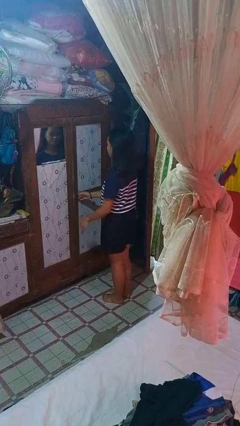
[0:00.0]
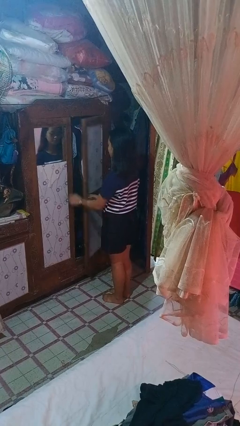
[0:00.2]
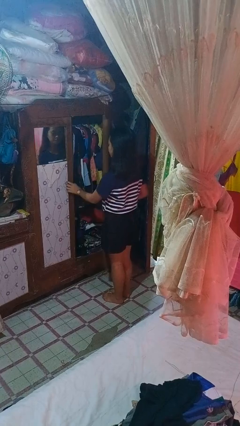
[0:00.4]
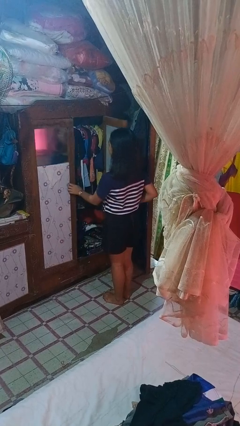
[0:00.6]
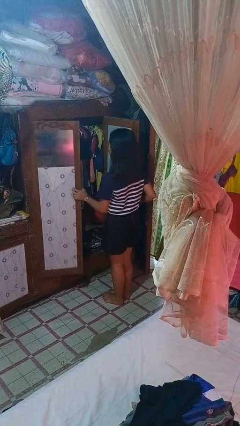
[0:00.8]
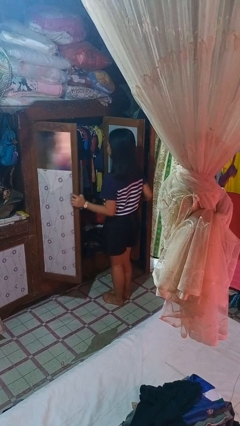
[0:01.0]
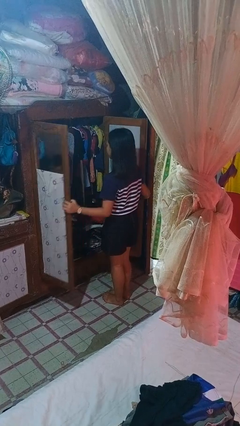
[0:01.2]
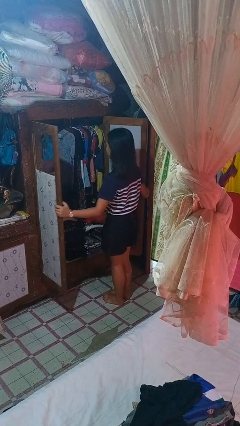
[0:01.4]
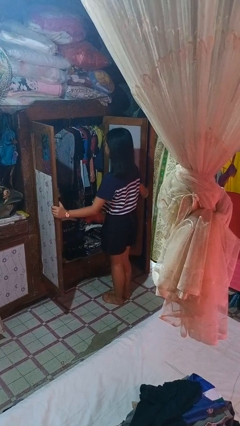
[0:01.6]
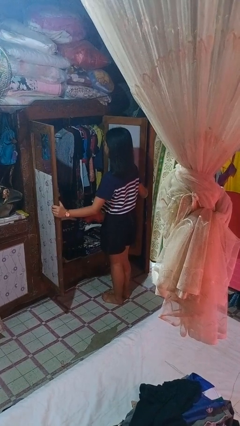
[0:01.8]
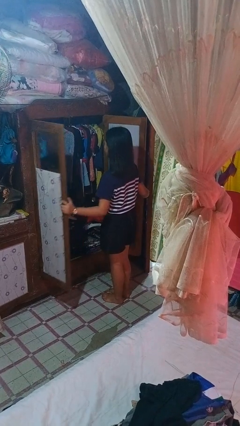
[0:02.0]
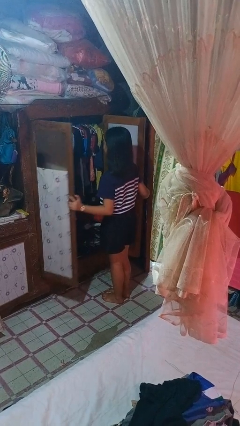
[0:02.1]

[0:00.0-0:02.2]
person opens closet door

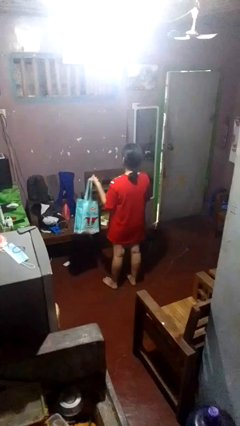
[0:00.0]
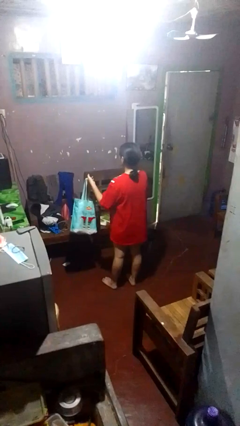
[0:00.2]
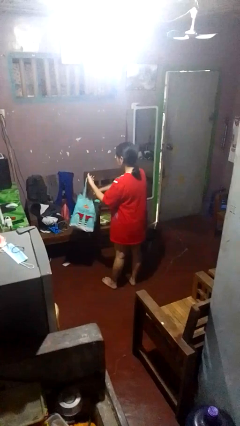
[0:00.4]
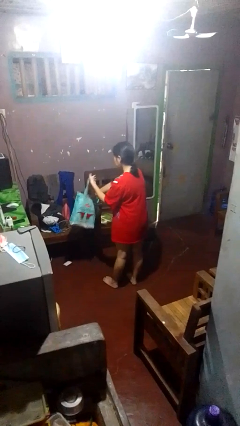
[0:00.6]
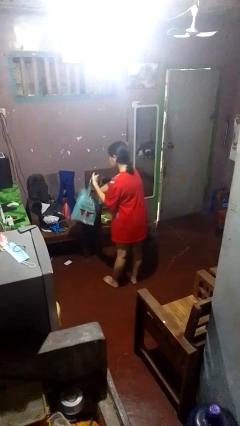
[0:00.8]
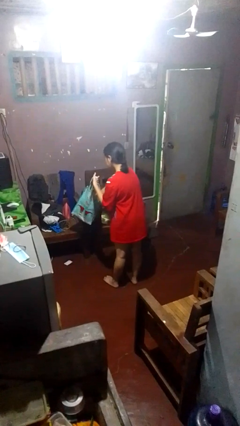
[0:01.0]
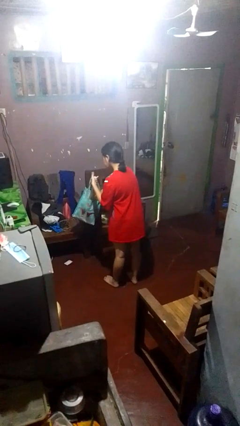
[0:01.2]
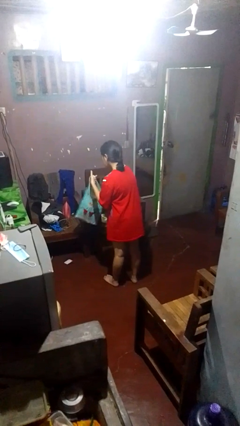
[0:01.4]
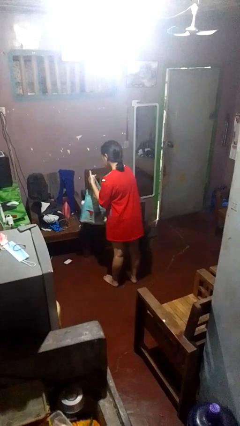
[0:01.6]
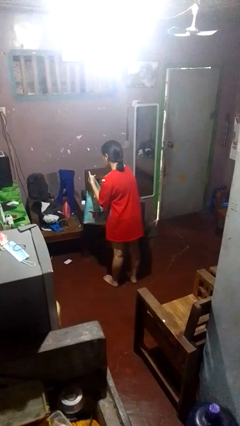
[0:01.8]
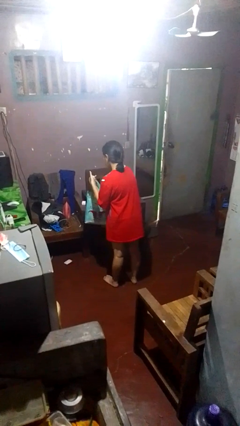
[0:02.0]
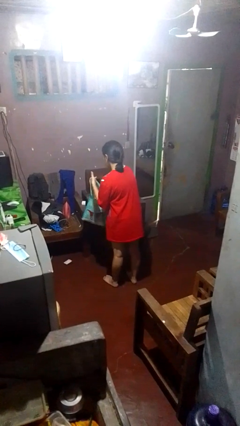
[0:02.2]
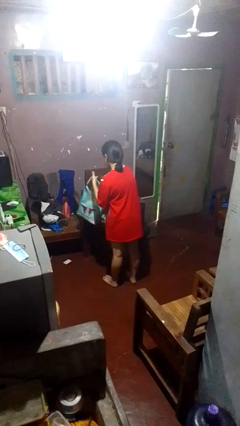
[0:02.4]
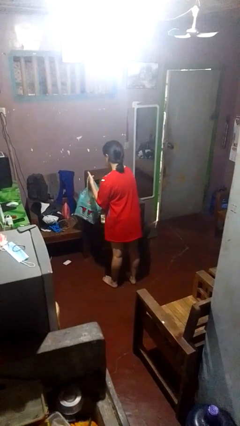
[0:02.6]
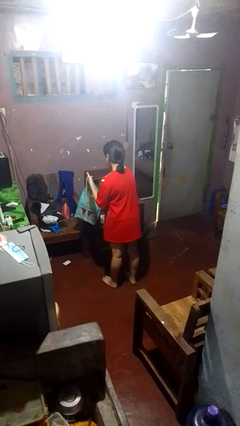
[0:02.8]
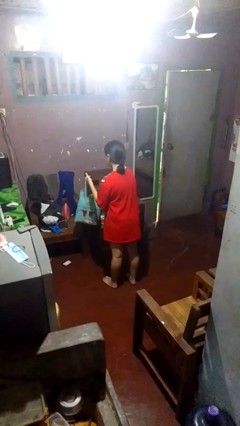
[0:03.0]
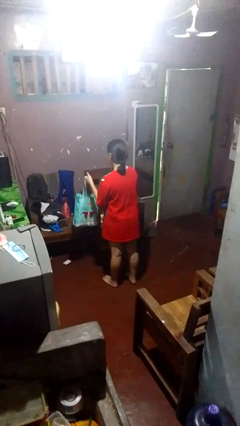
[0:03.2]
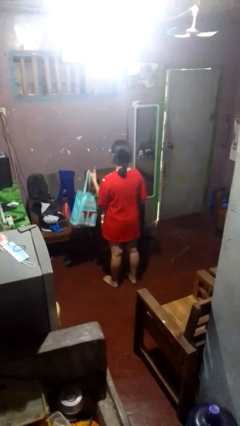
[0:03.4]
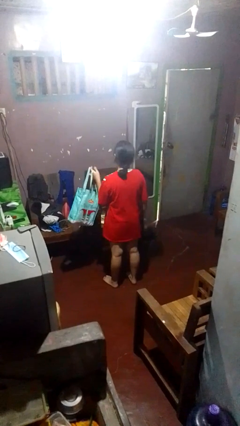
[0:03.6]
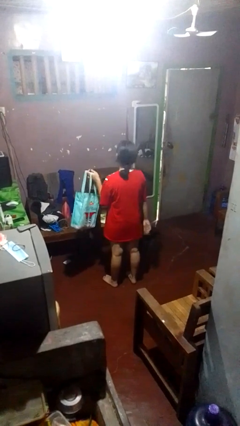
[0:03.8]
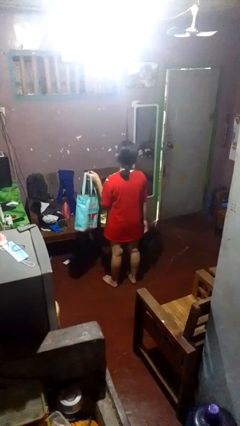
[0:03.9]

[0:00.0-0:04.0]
person searches in bag

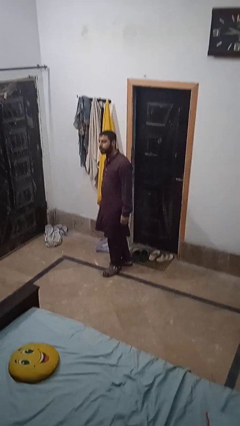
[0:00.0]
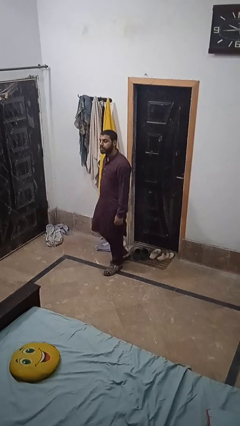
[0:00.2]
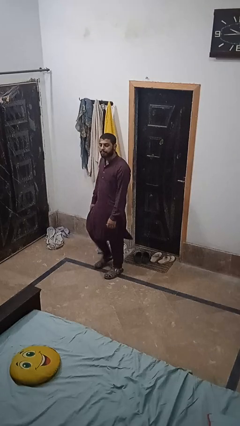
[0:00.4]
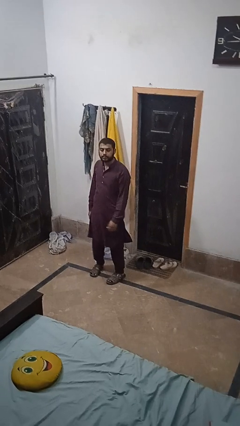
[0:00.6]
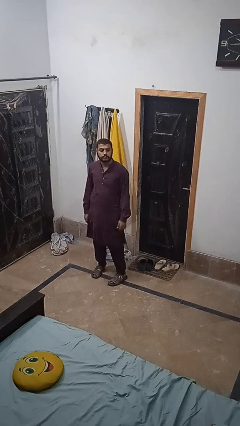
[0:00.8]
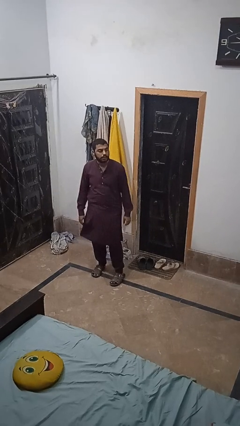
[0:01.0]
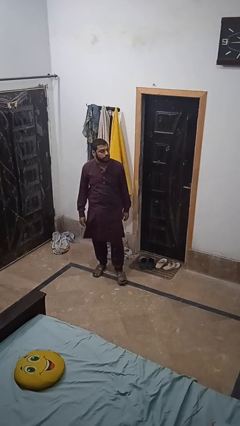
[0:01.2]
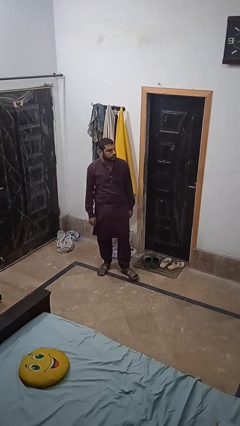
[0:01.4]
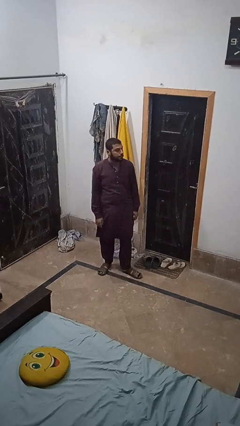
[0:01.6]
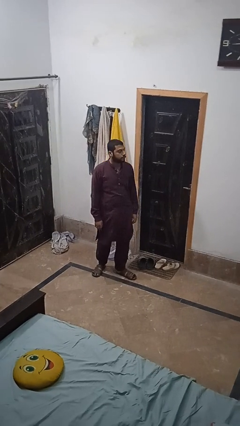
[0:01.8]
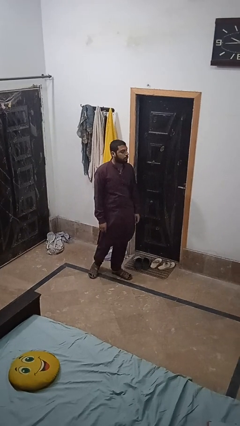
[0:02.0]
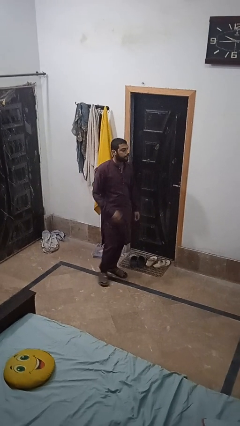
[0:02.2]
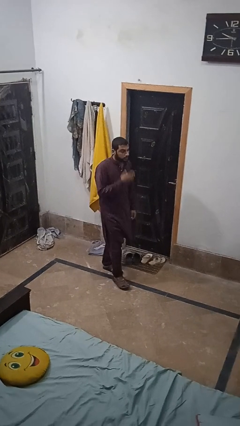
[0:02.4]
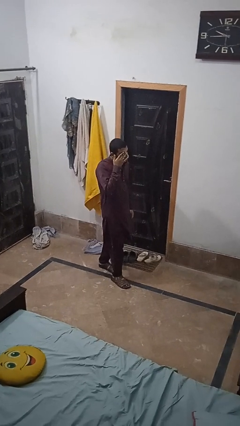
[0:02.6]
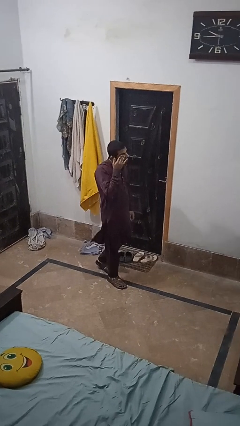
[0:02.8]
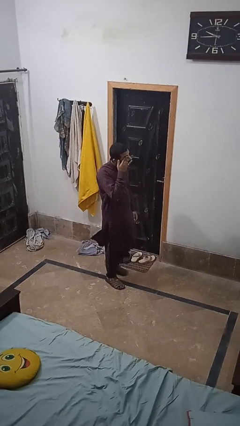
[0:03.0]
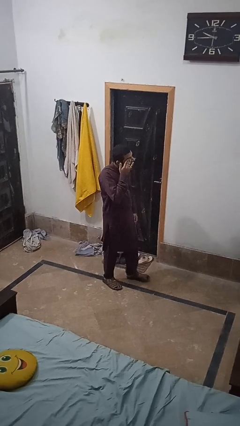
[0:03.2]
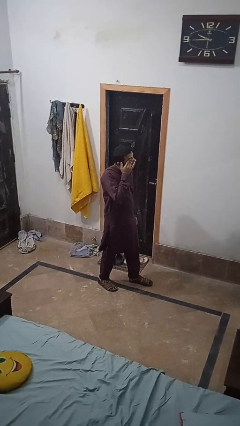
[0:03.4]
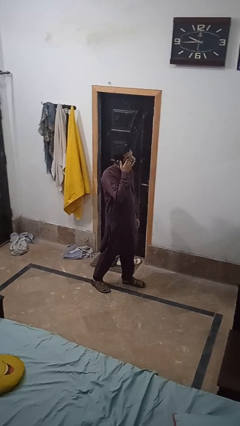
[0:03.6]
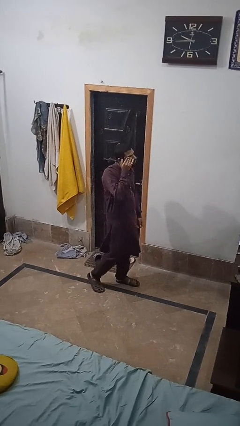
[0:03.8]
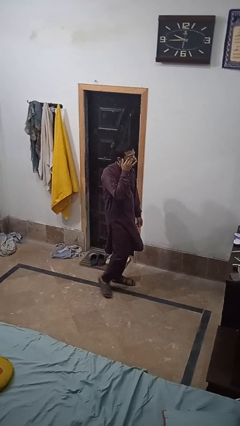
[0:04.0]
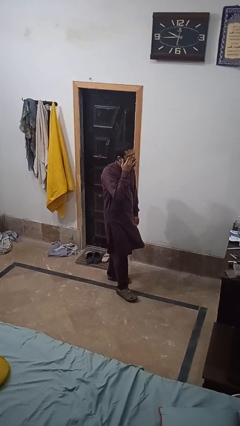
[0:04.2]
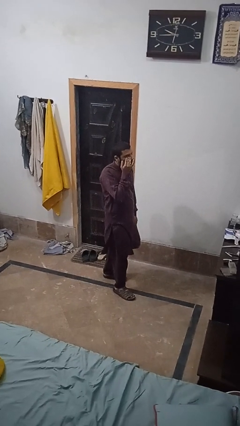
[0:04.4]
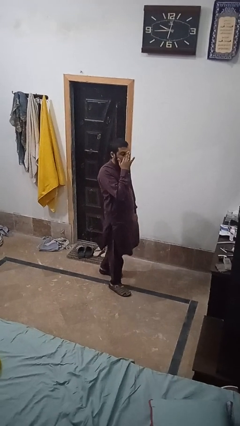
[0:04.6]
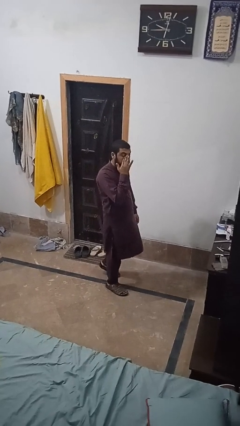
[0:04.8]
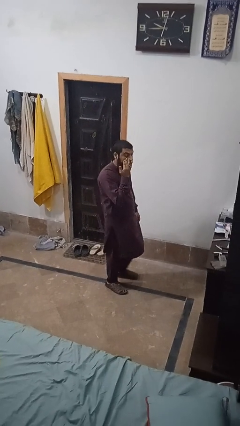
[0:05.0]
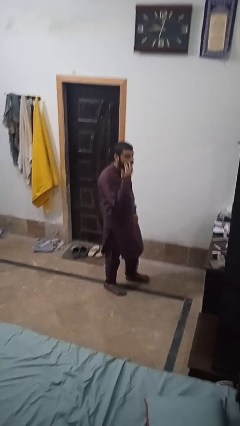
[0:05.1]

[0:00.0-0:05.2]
person rubs eyes

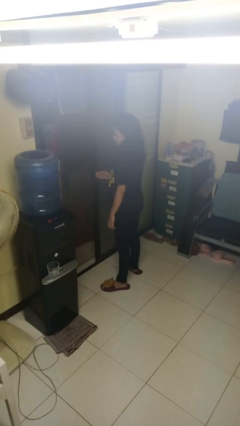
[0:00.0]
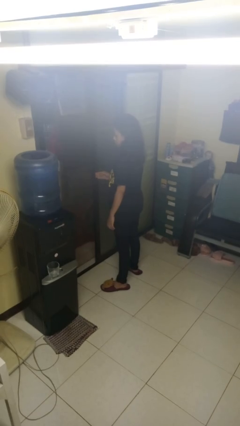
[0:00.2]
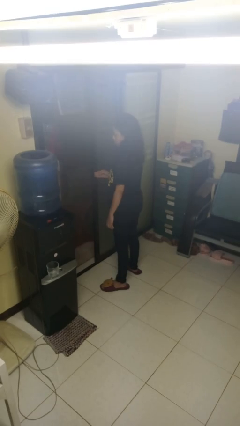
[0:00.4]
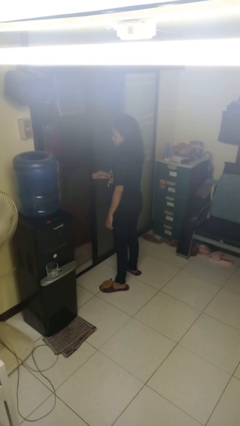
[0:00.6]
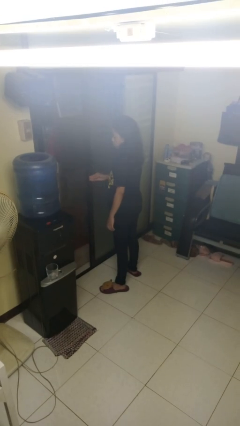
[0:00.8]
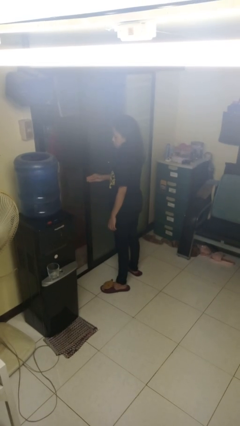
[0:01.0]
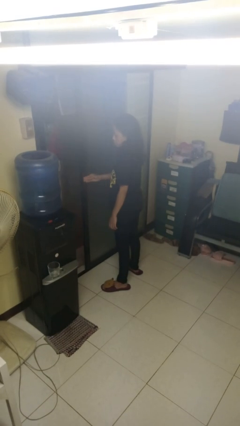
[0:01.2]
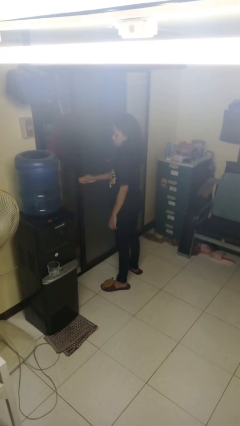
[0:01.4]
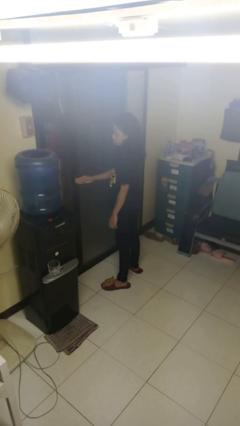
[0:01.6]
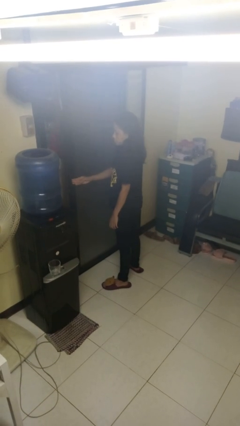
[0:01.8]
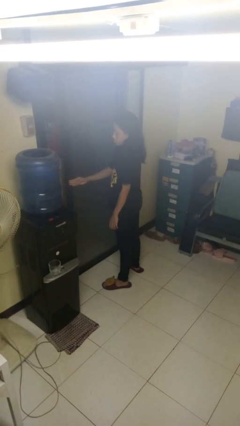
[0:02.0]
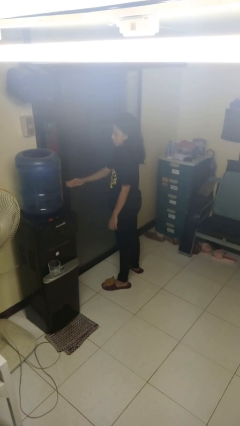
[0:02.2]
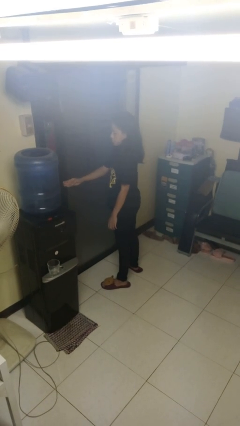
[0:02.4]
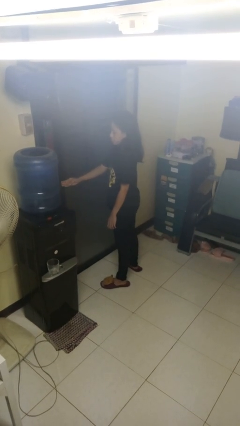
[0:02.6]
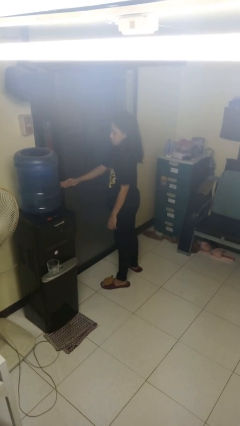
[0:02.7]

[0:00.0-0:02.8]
person closes sliding door

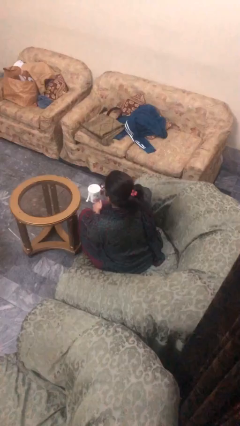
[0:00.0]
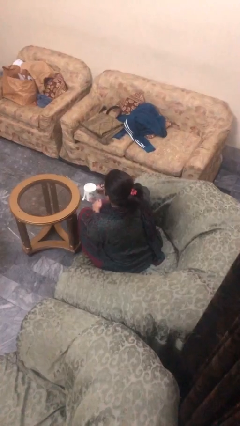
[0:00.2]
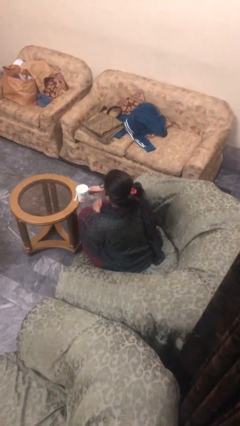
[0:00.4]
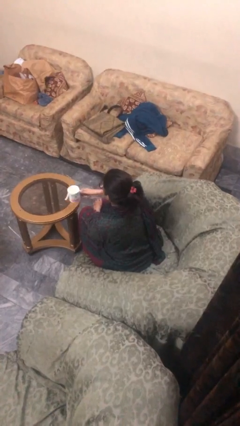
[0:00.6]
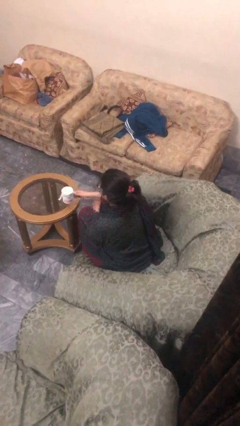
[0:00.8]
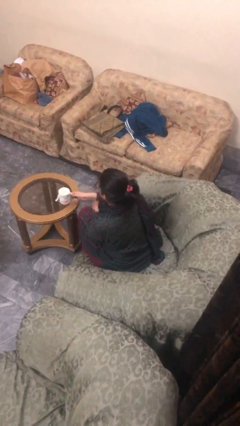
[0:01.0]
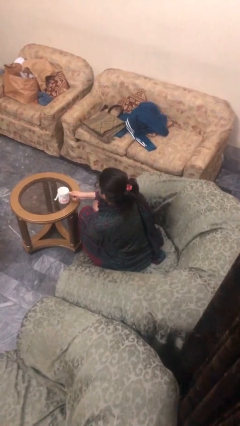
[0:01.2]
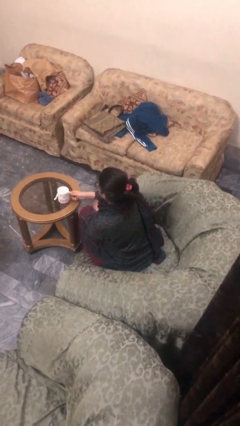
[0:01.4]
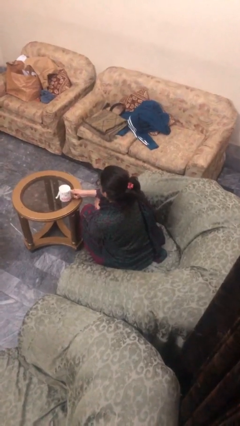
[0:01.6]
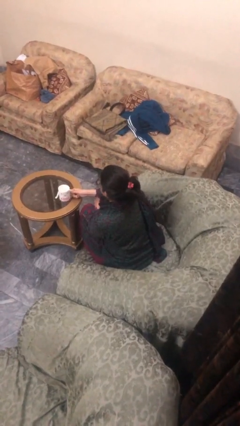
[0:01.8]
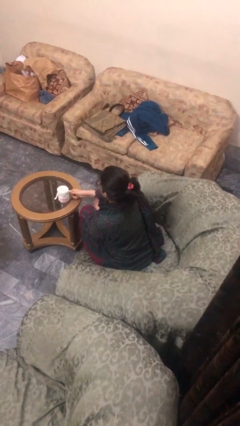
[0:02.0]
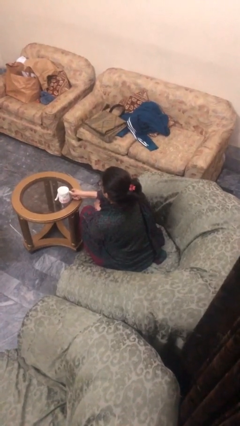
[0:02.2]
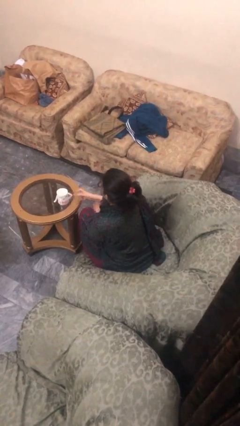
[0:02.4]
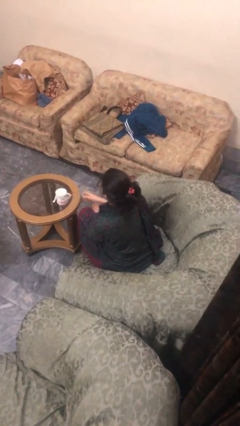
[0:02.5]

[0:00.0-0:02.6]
person puts down object on table

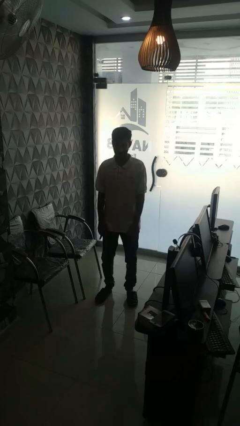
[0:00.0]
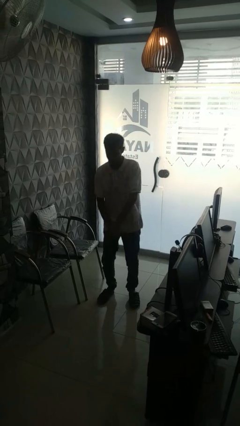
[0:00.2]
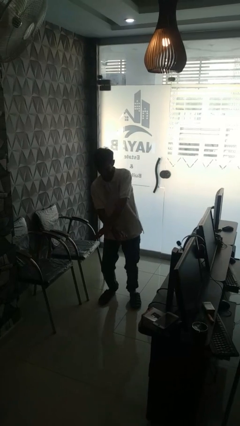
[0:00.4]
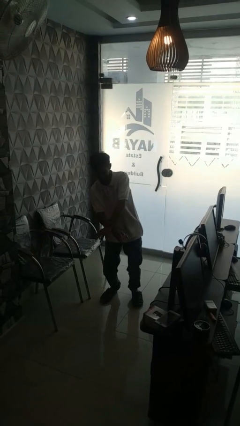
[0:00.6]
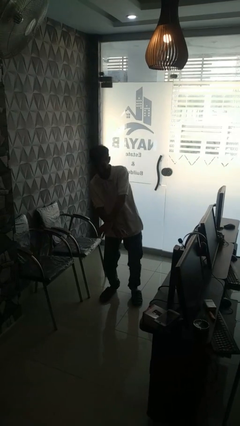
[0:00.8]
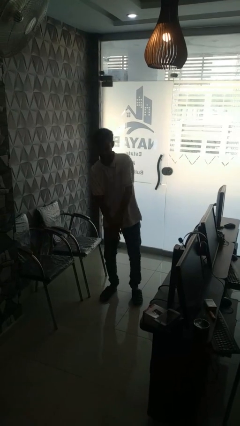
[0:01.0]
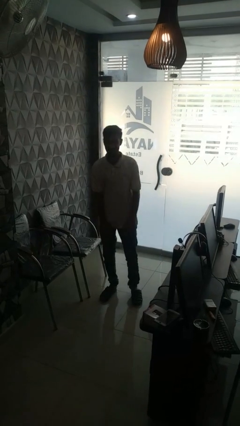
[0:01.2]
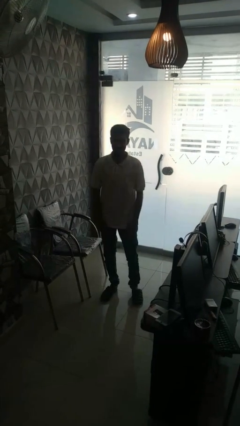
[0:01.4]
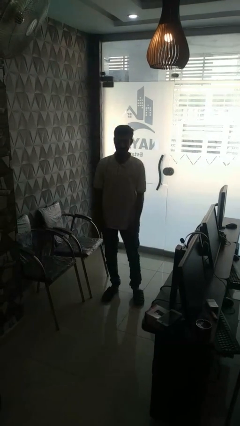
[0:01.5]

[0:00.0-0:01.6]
person dances in place
